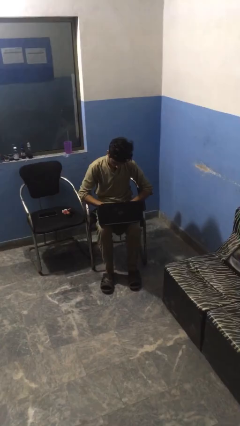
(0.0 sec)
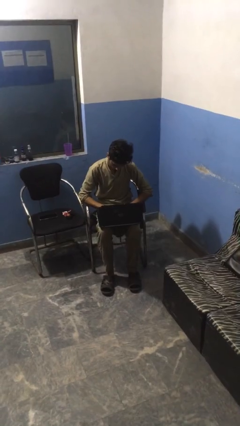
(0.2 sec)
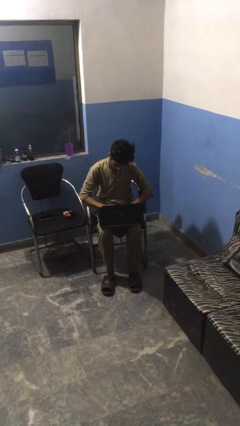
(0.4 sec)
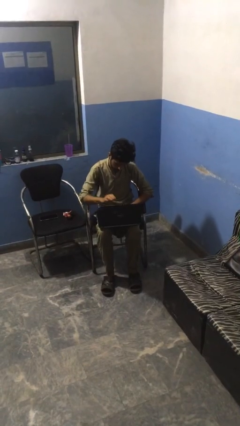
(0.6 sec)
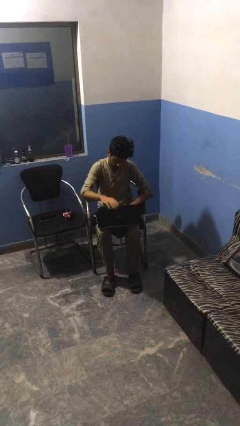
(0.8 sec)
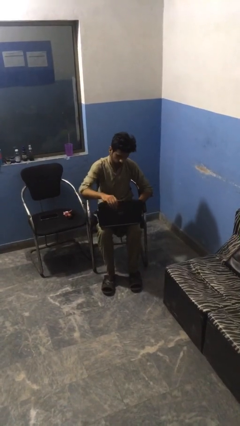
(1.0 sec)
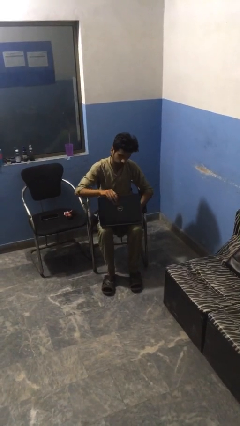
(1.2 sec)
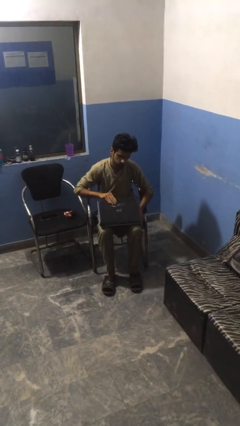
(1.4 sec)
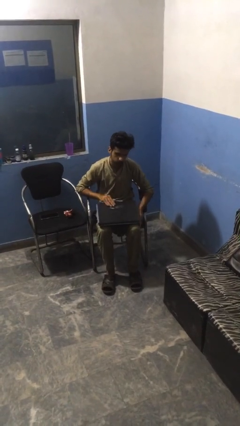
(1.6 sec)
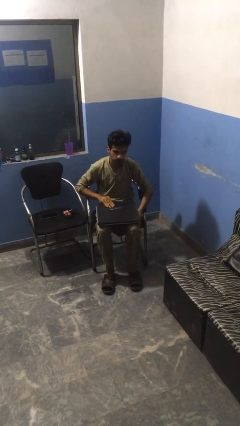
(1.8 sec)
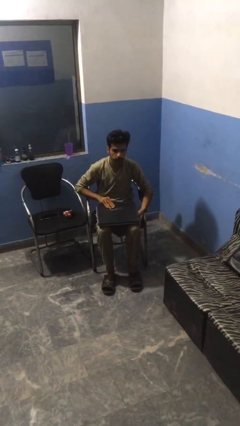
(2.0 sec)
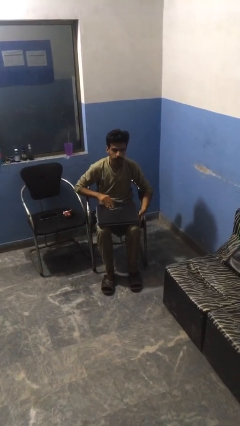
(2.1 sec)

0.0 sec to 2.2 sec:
person closes laptop

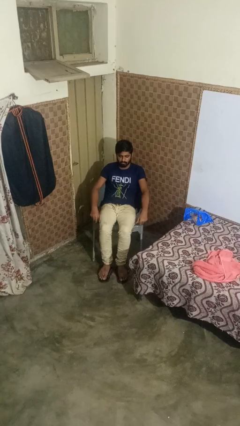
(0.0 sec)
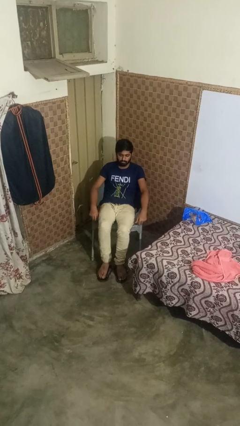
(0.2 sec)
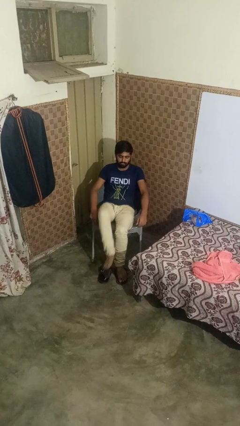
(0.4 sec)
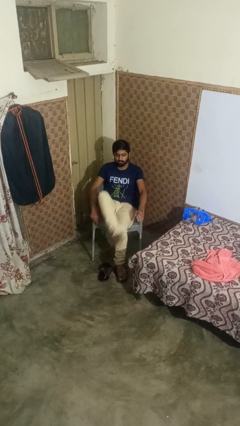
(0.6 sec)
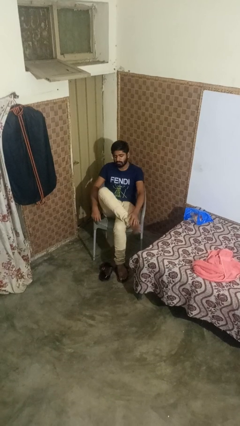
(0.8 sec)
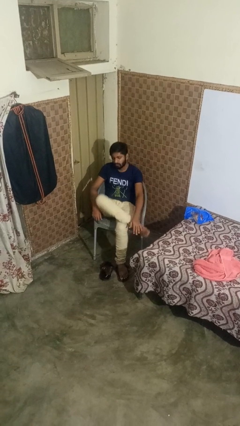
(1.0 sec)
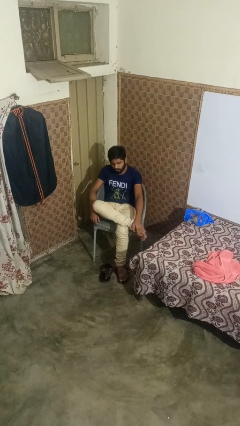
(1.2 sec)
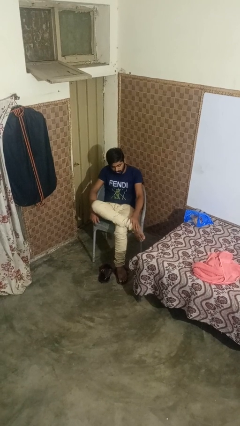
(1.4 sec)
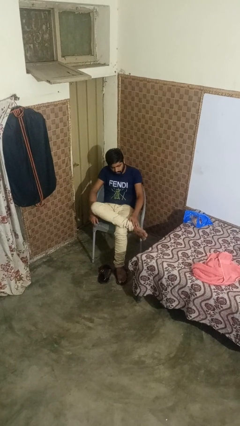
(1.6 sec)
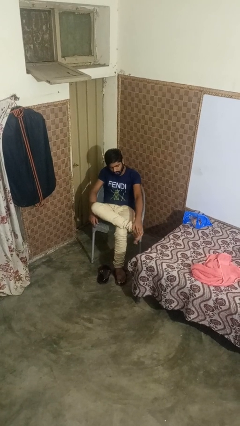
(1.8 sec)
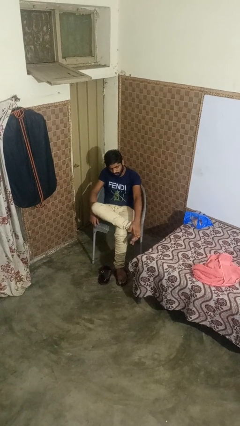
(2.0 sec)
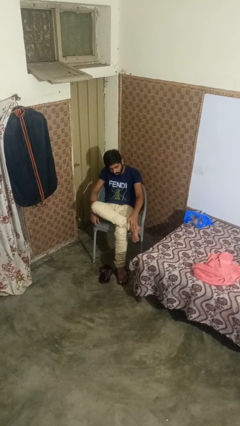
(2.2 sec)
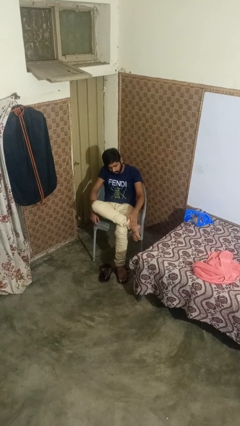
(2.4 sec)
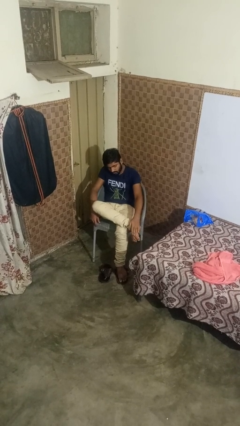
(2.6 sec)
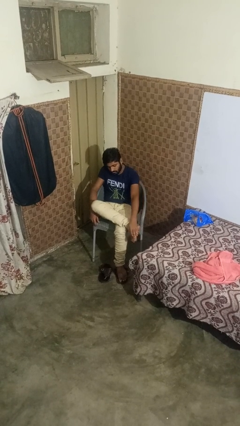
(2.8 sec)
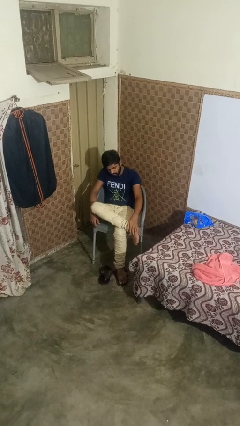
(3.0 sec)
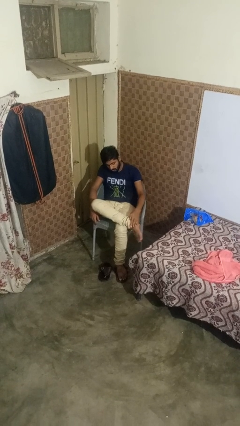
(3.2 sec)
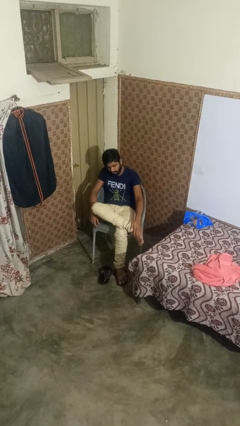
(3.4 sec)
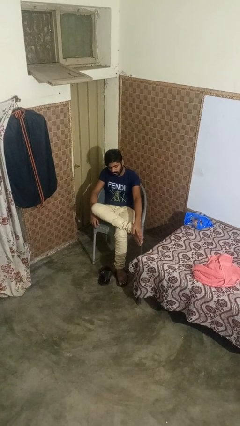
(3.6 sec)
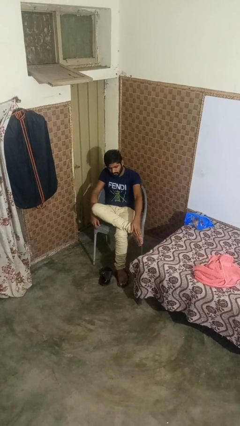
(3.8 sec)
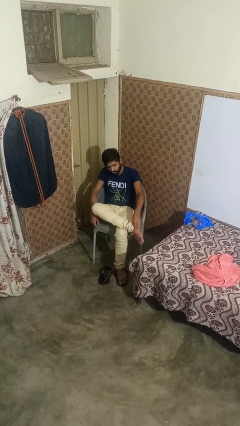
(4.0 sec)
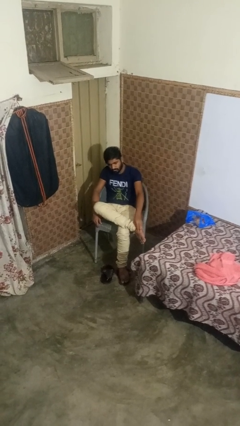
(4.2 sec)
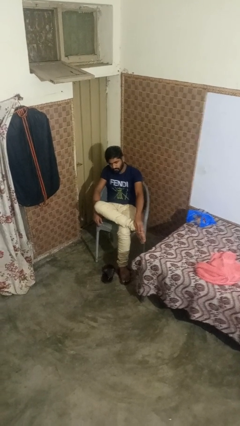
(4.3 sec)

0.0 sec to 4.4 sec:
person rubs foot

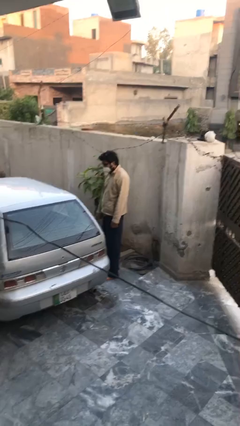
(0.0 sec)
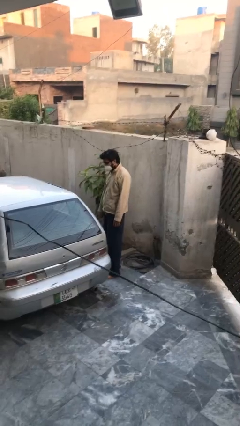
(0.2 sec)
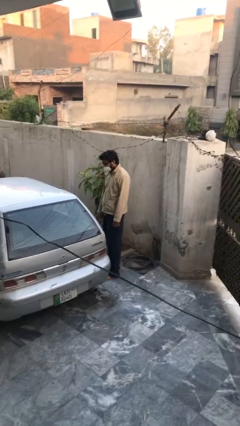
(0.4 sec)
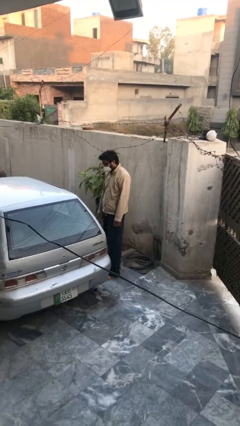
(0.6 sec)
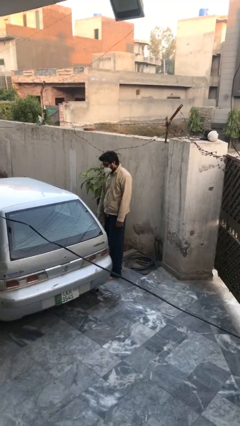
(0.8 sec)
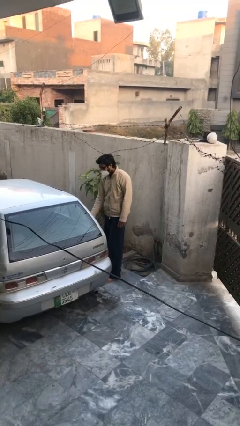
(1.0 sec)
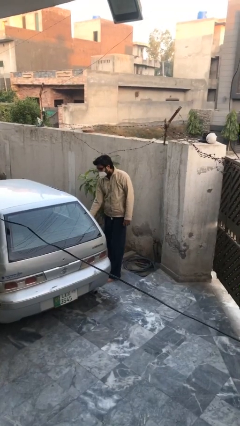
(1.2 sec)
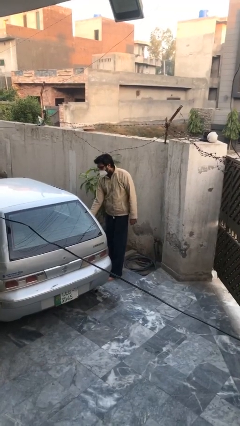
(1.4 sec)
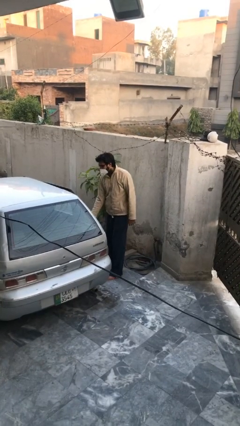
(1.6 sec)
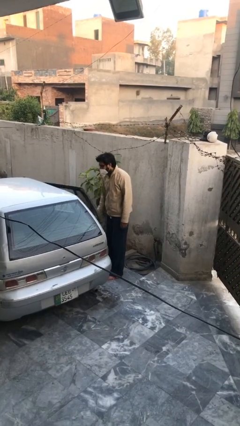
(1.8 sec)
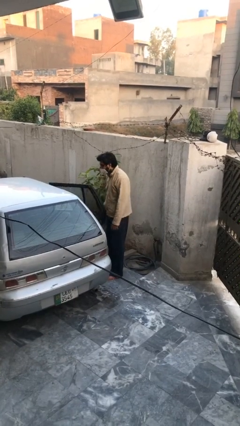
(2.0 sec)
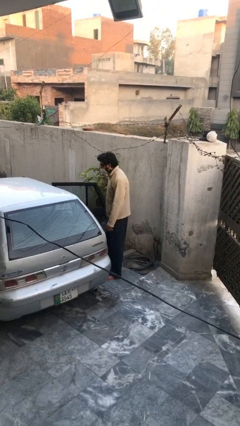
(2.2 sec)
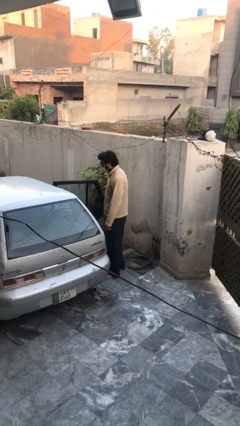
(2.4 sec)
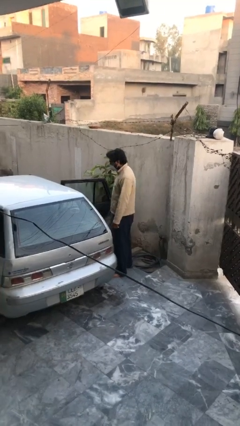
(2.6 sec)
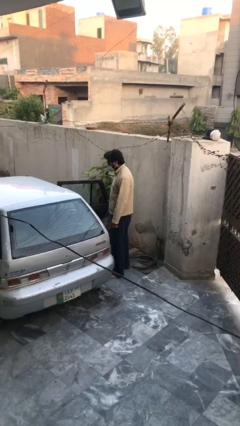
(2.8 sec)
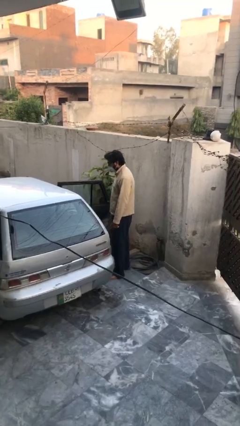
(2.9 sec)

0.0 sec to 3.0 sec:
person opens car door

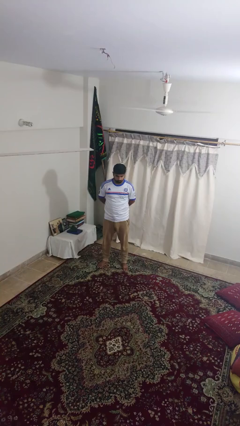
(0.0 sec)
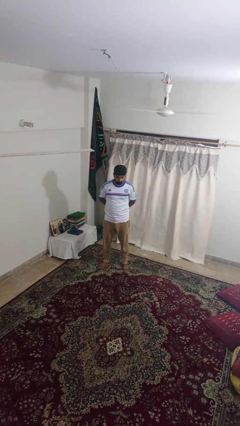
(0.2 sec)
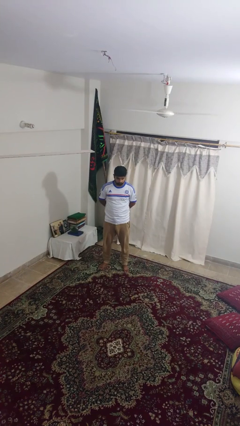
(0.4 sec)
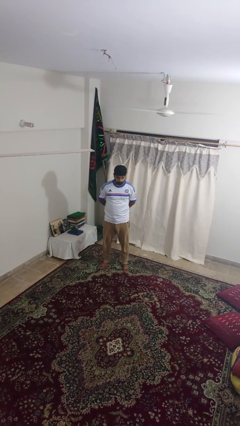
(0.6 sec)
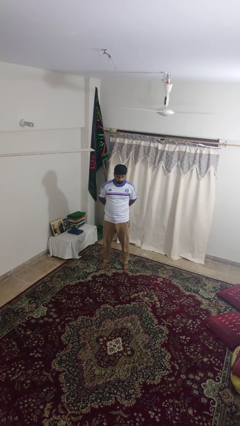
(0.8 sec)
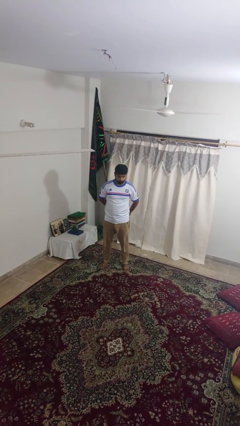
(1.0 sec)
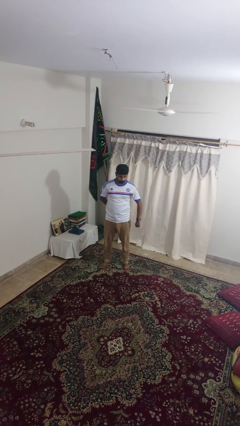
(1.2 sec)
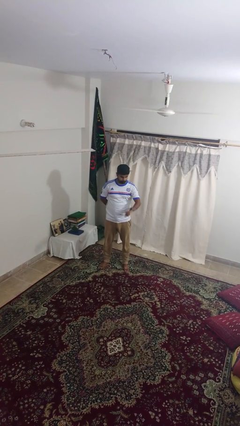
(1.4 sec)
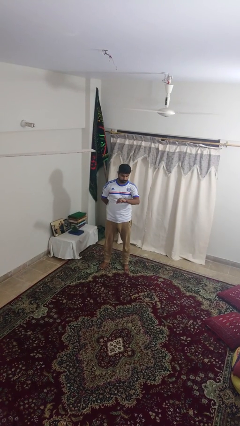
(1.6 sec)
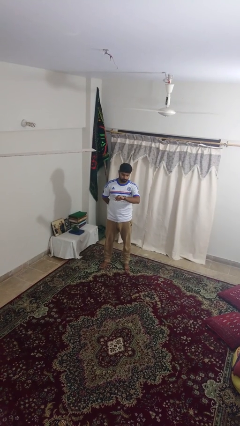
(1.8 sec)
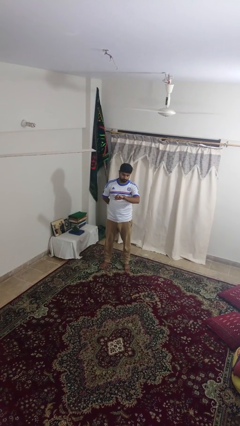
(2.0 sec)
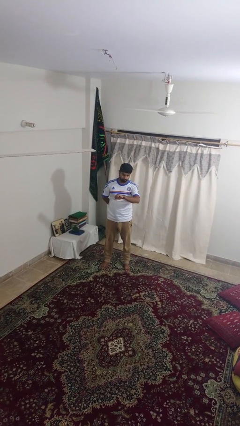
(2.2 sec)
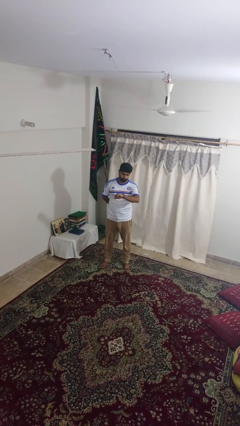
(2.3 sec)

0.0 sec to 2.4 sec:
person looks at wristwatch

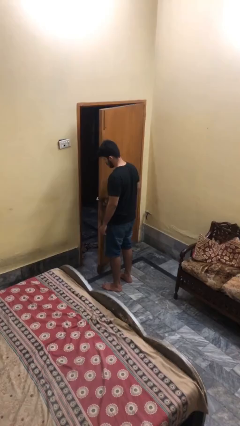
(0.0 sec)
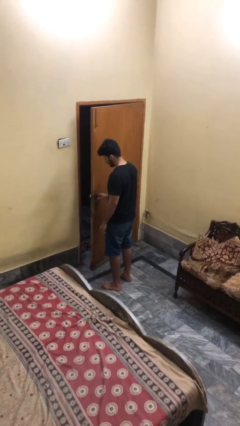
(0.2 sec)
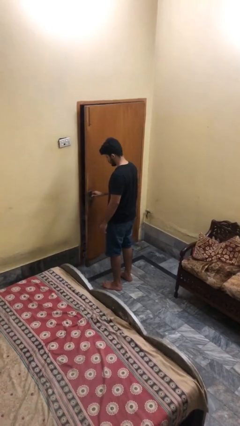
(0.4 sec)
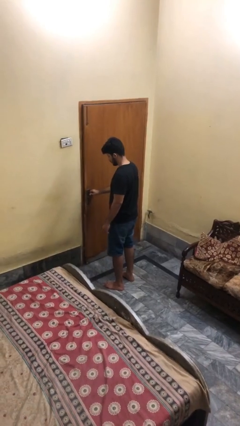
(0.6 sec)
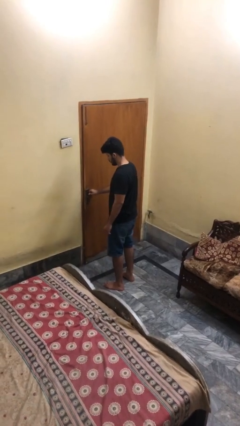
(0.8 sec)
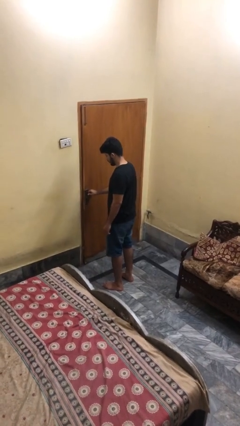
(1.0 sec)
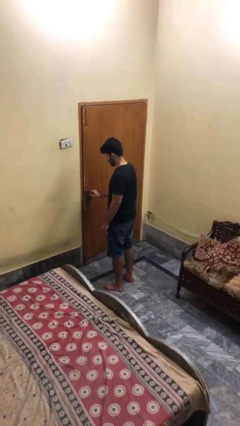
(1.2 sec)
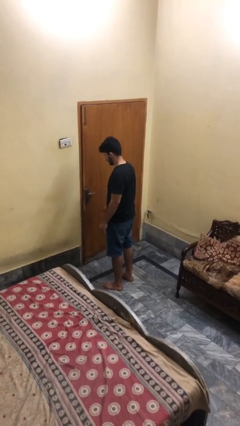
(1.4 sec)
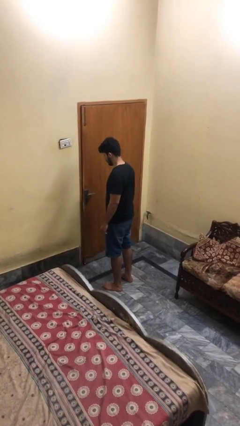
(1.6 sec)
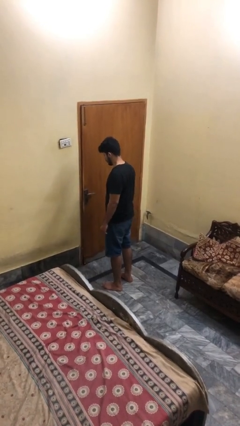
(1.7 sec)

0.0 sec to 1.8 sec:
person closes facility door

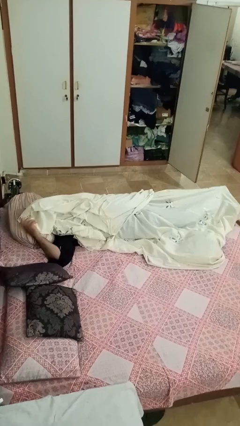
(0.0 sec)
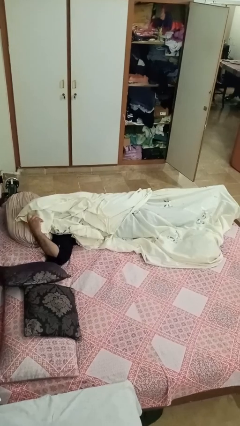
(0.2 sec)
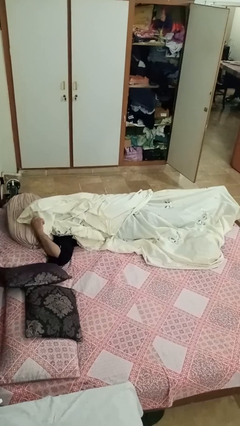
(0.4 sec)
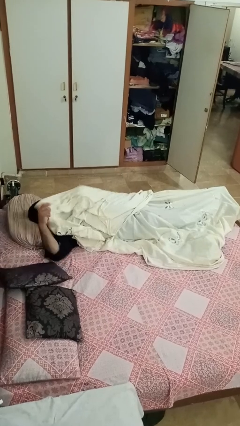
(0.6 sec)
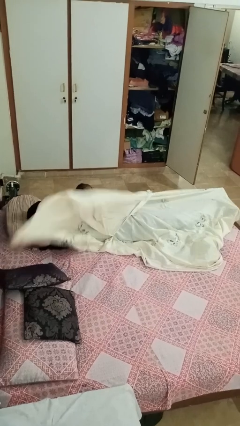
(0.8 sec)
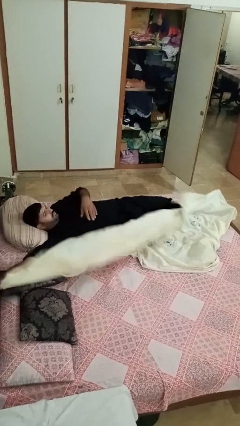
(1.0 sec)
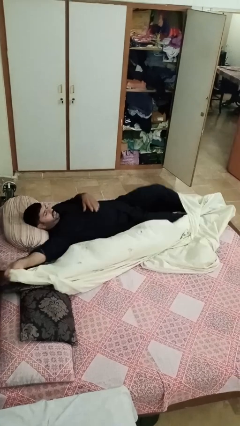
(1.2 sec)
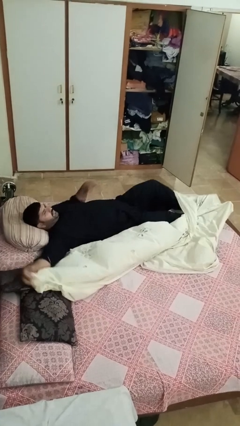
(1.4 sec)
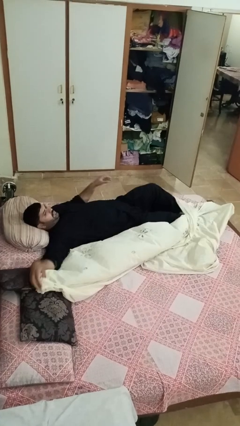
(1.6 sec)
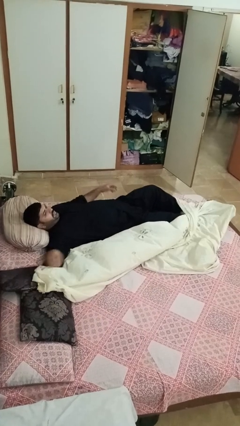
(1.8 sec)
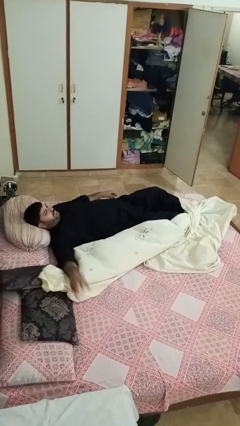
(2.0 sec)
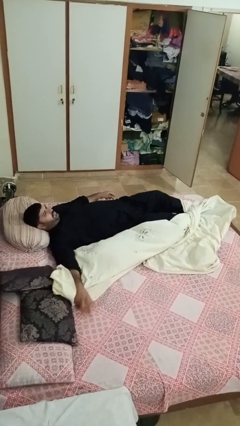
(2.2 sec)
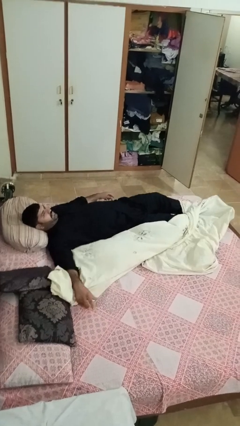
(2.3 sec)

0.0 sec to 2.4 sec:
person uncovers with bedsheets

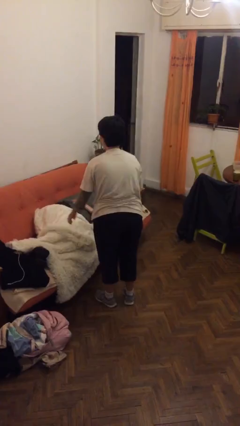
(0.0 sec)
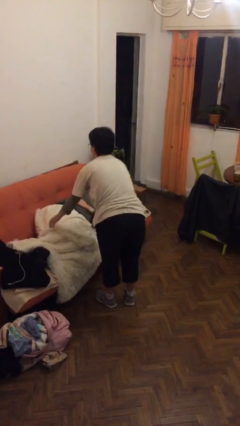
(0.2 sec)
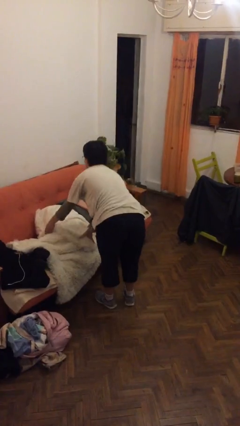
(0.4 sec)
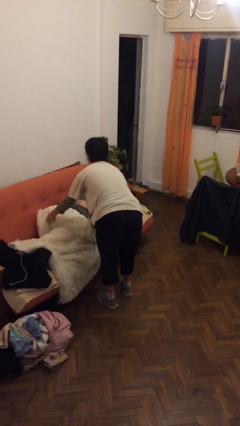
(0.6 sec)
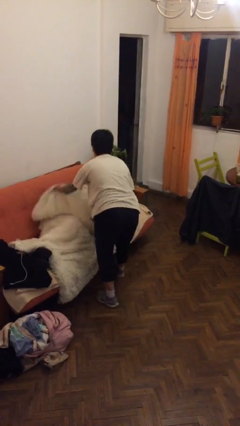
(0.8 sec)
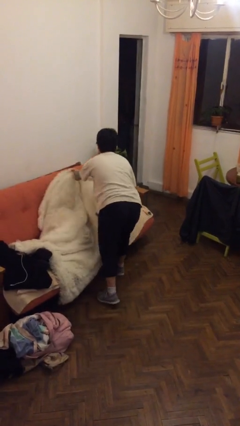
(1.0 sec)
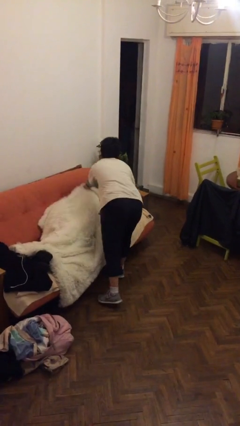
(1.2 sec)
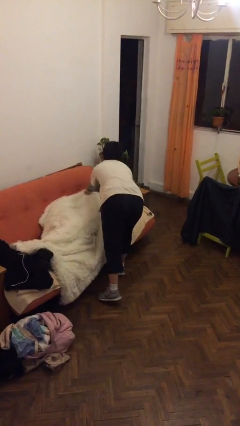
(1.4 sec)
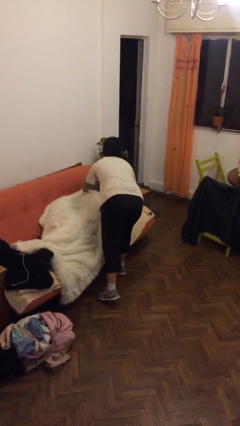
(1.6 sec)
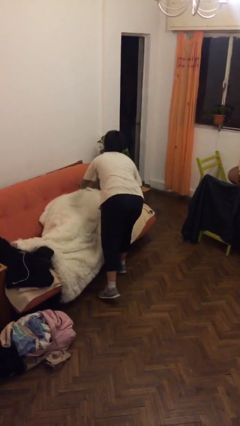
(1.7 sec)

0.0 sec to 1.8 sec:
person covers friend with blanket
